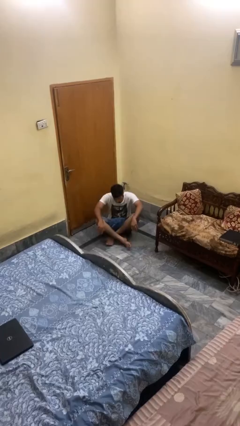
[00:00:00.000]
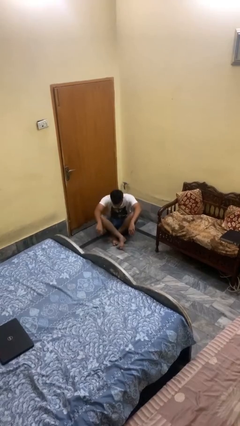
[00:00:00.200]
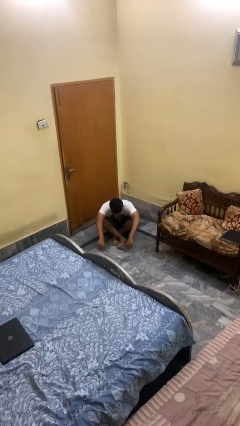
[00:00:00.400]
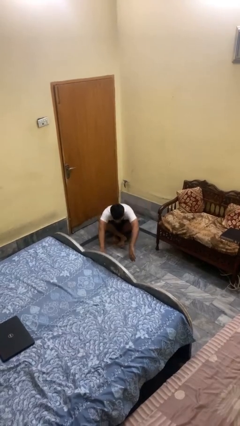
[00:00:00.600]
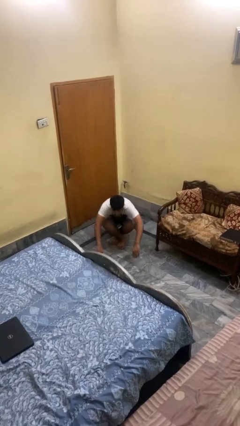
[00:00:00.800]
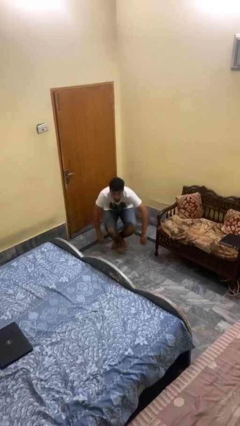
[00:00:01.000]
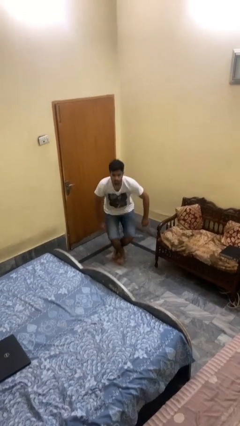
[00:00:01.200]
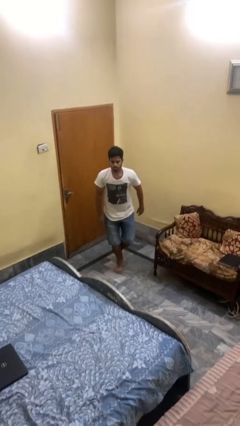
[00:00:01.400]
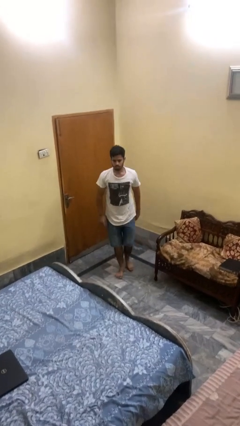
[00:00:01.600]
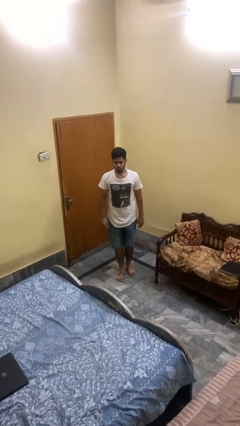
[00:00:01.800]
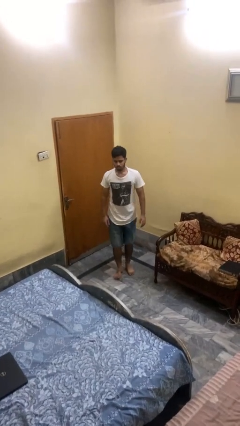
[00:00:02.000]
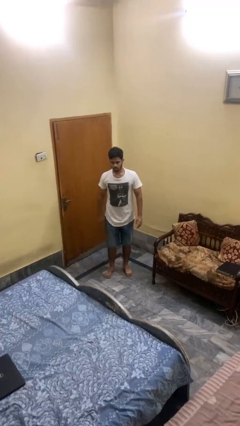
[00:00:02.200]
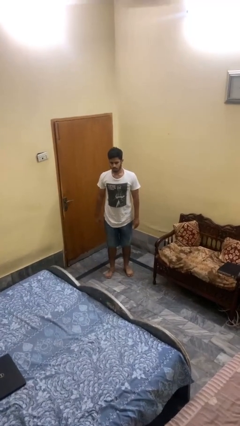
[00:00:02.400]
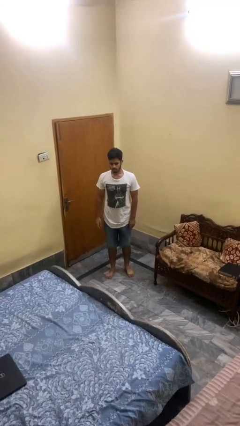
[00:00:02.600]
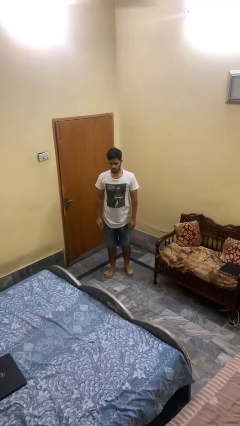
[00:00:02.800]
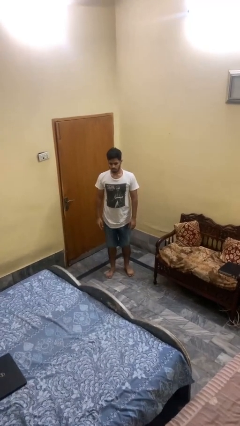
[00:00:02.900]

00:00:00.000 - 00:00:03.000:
person stands up from floor

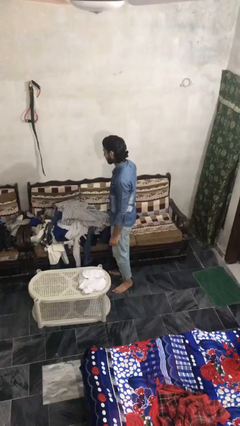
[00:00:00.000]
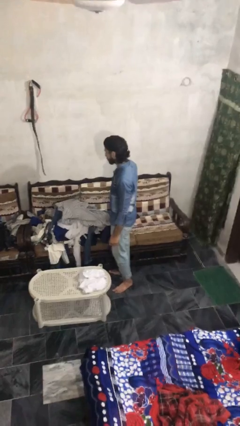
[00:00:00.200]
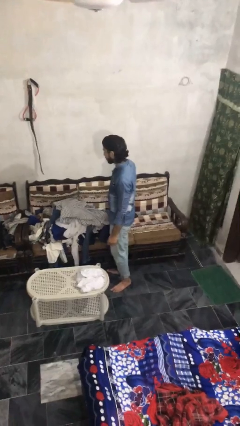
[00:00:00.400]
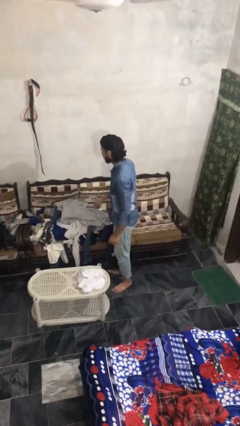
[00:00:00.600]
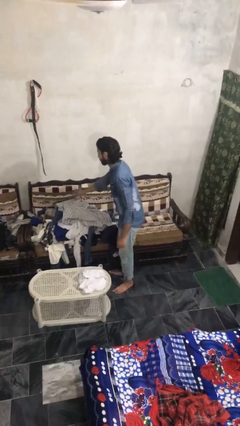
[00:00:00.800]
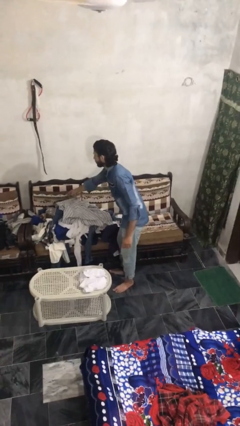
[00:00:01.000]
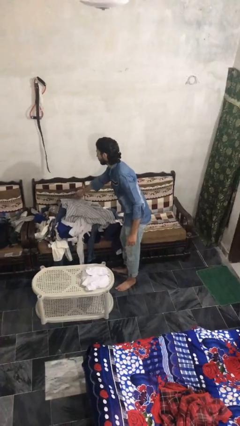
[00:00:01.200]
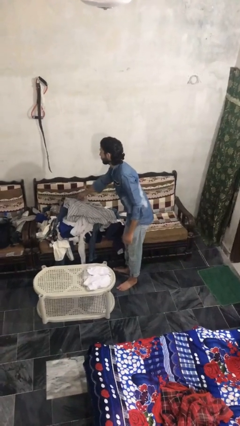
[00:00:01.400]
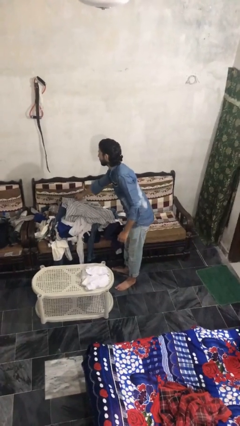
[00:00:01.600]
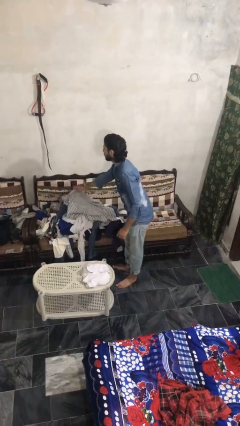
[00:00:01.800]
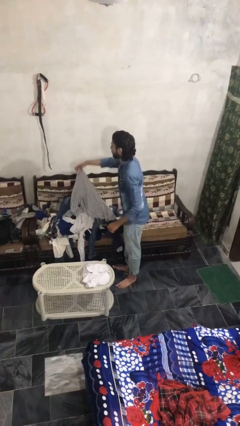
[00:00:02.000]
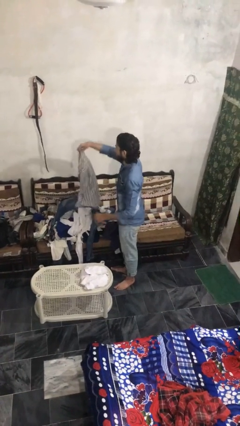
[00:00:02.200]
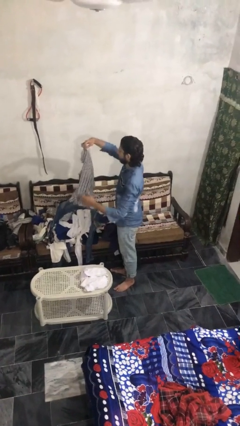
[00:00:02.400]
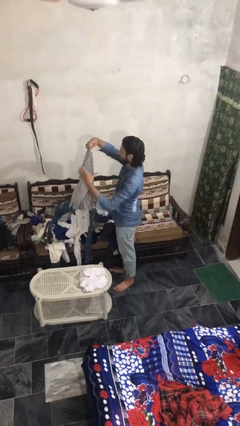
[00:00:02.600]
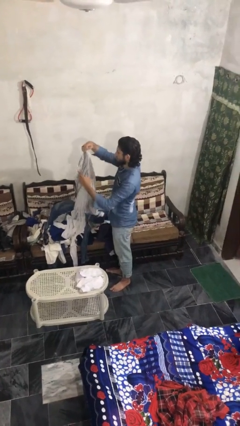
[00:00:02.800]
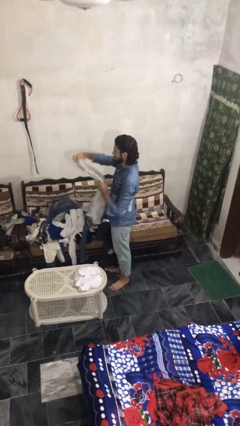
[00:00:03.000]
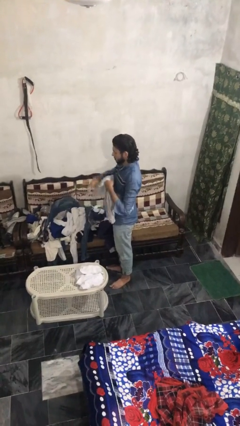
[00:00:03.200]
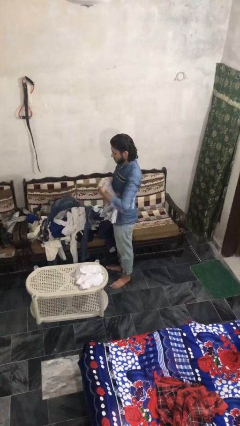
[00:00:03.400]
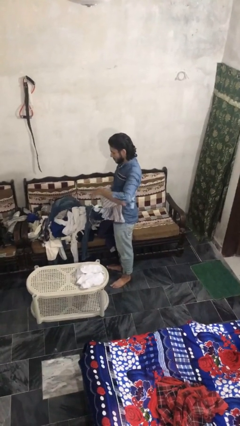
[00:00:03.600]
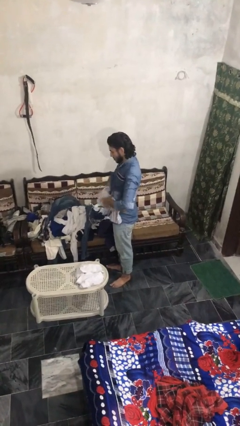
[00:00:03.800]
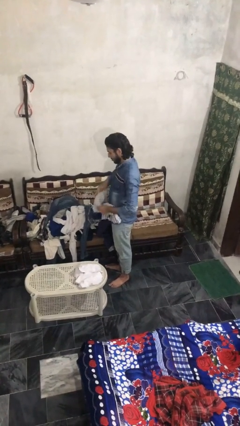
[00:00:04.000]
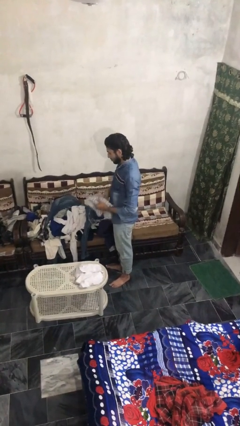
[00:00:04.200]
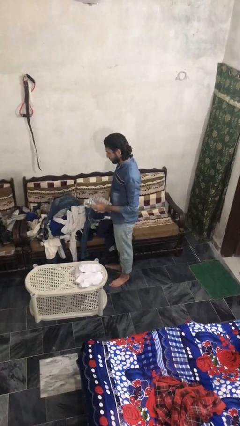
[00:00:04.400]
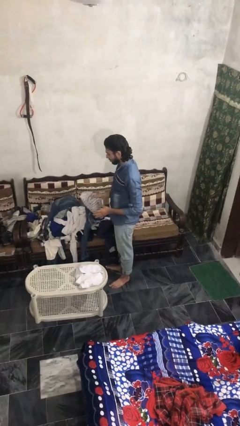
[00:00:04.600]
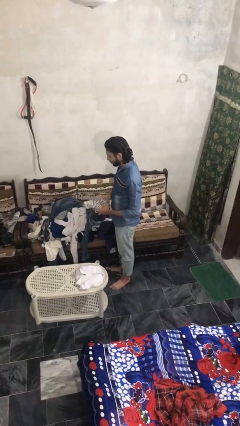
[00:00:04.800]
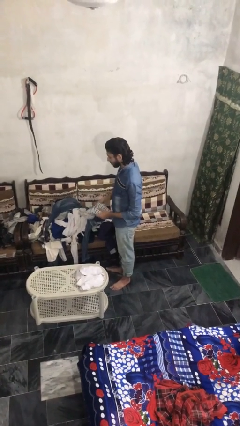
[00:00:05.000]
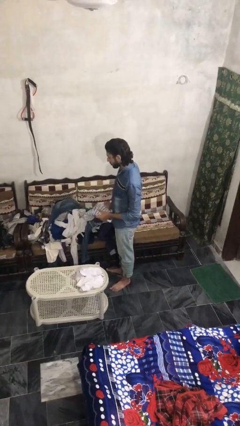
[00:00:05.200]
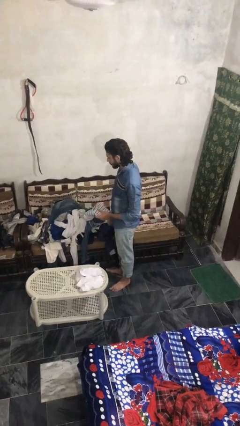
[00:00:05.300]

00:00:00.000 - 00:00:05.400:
person folds shirt

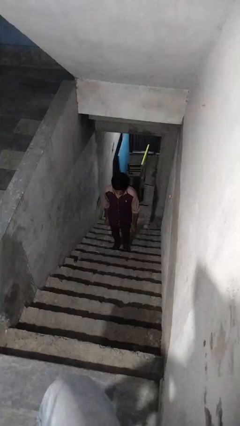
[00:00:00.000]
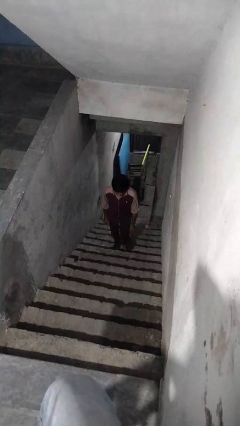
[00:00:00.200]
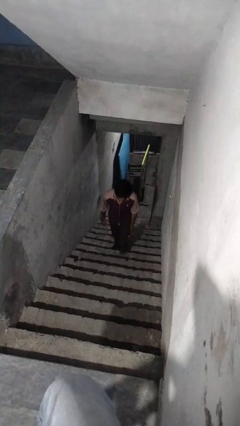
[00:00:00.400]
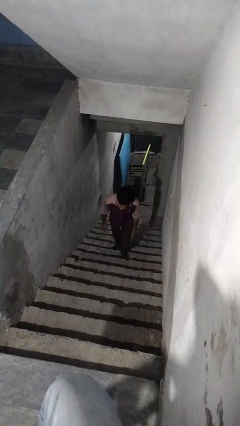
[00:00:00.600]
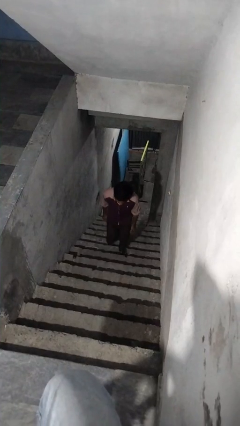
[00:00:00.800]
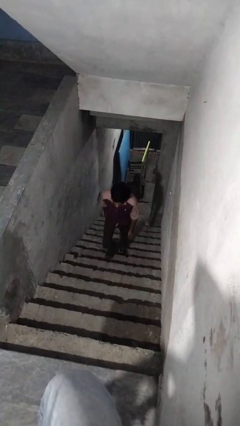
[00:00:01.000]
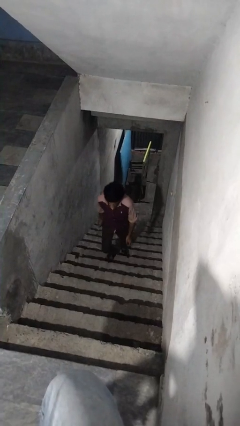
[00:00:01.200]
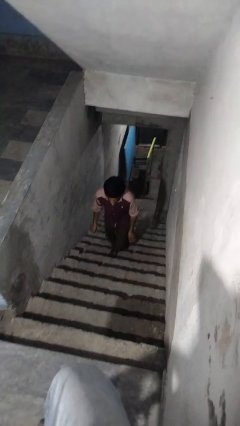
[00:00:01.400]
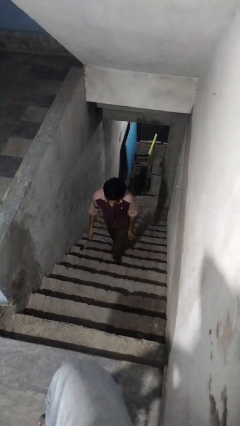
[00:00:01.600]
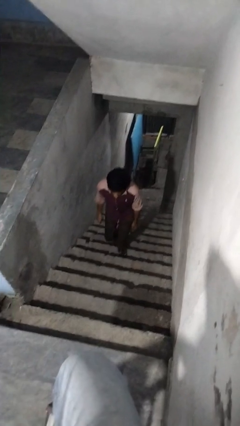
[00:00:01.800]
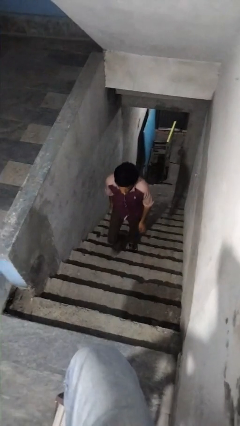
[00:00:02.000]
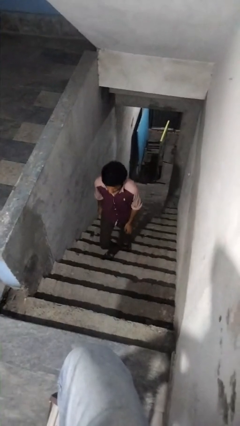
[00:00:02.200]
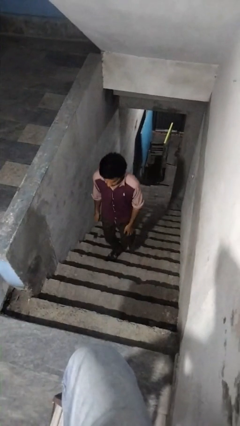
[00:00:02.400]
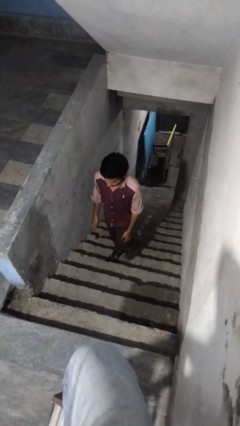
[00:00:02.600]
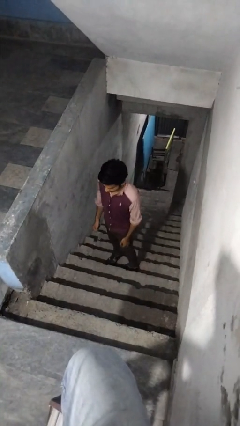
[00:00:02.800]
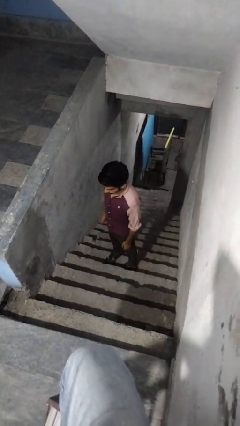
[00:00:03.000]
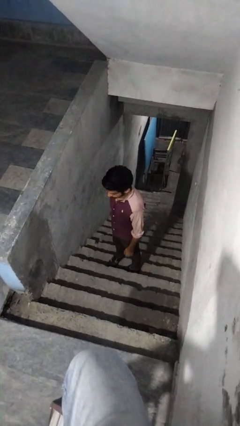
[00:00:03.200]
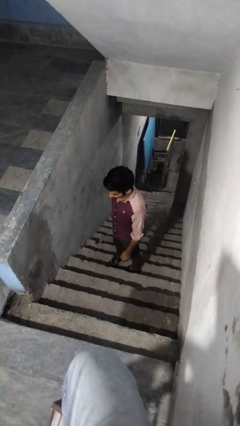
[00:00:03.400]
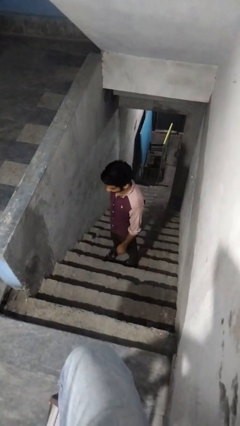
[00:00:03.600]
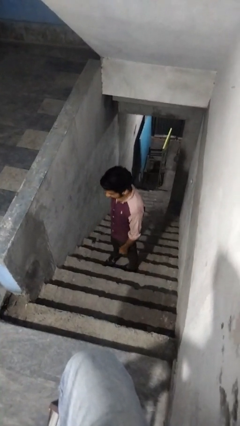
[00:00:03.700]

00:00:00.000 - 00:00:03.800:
person climbs up stairs

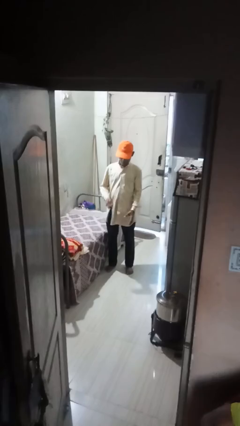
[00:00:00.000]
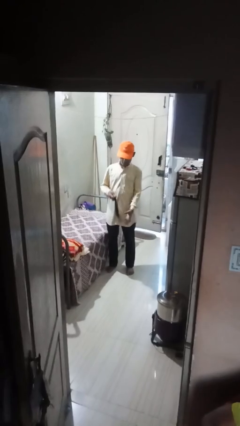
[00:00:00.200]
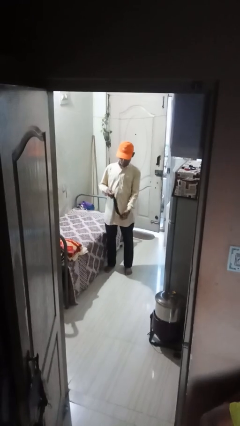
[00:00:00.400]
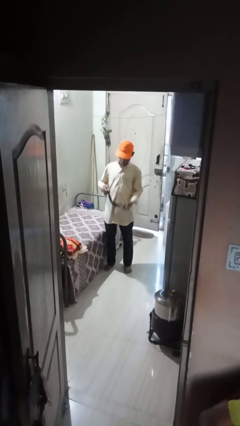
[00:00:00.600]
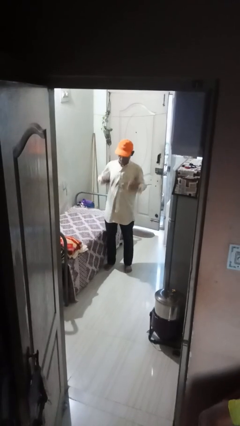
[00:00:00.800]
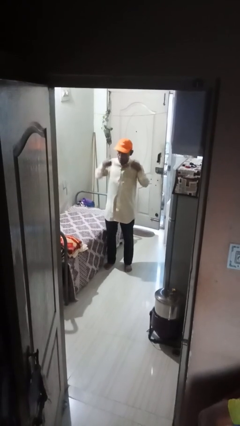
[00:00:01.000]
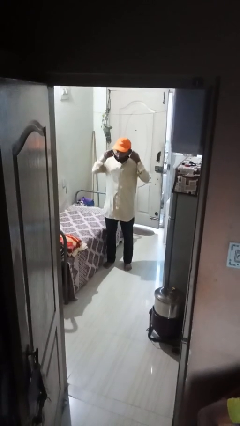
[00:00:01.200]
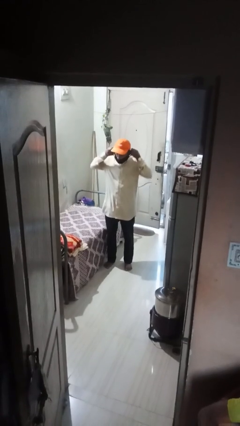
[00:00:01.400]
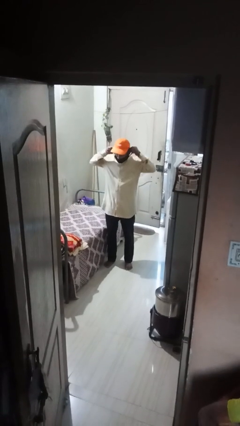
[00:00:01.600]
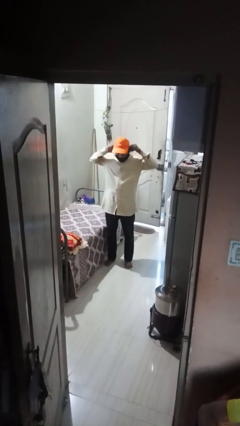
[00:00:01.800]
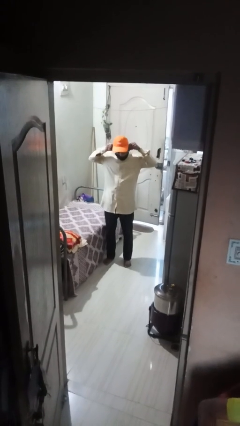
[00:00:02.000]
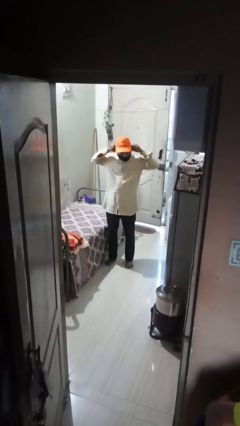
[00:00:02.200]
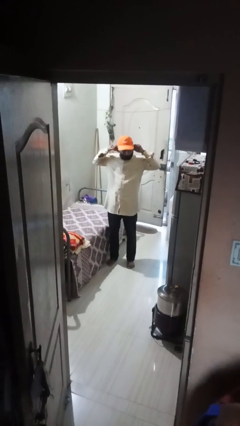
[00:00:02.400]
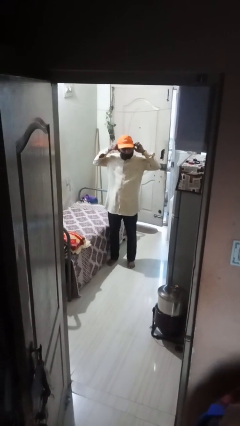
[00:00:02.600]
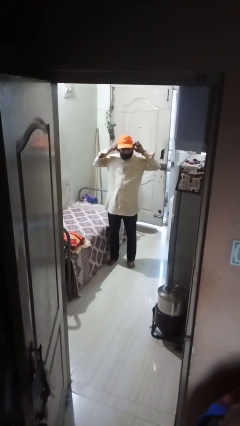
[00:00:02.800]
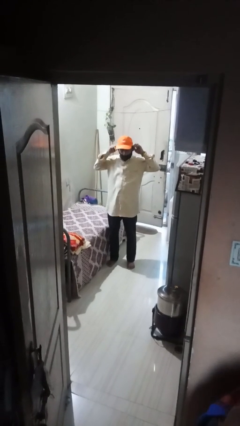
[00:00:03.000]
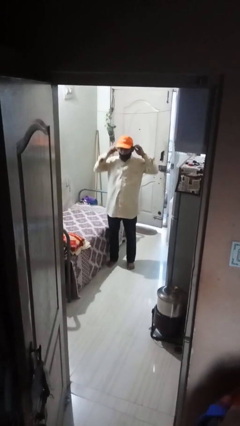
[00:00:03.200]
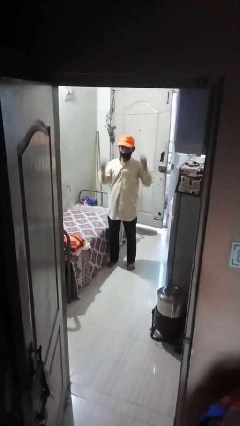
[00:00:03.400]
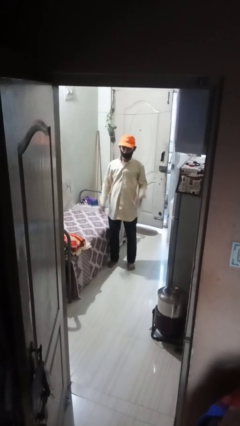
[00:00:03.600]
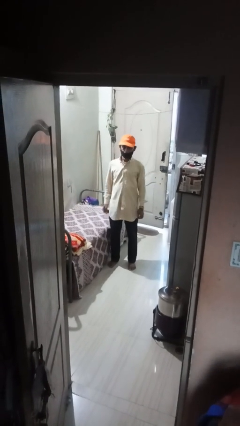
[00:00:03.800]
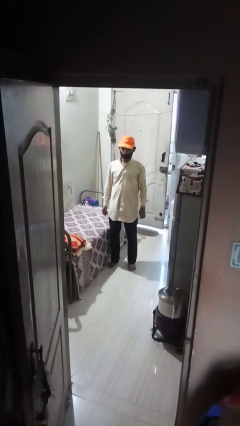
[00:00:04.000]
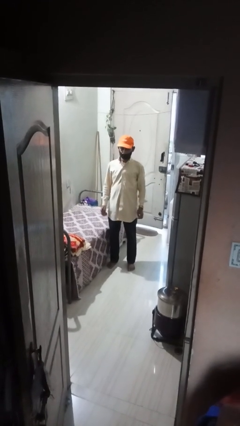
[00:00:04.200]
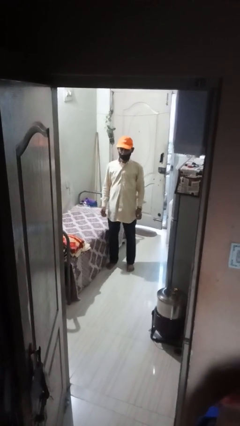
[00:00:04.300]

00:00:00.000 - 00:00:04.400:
person puts on facemask

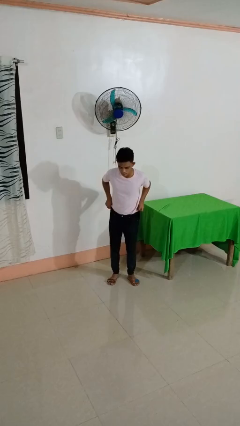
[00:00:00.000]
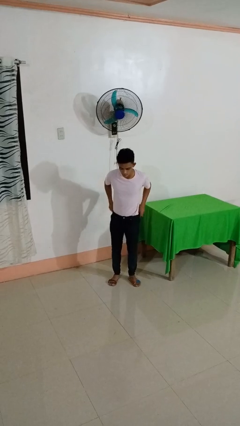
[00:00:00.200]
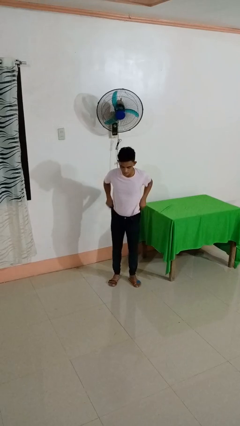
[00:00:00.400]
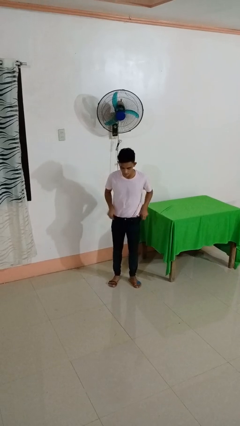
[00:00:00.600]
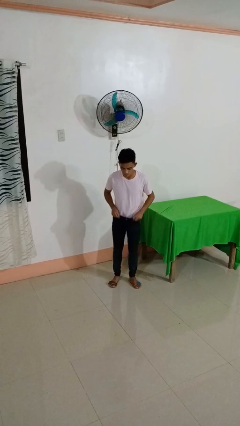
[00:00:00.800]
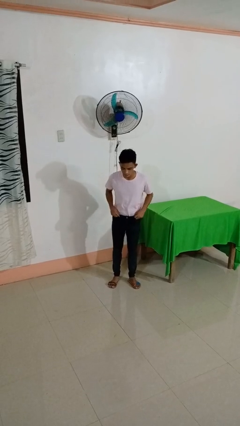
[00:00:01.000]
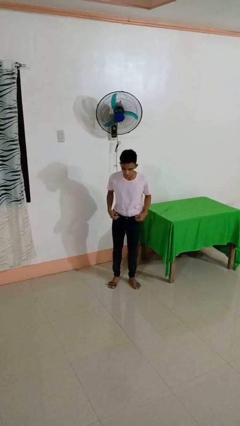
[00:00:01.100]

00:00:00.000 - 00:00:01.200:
person hikes up pants
